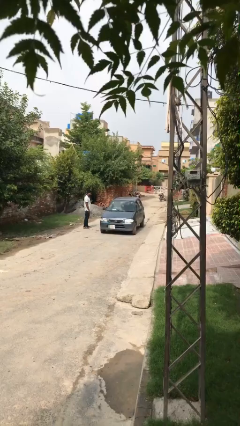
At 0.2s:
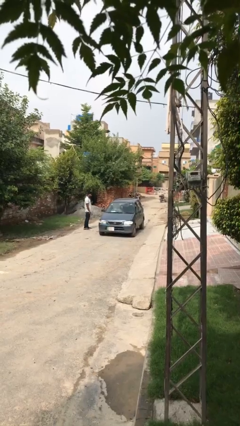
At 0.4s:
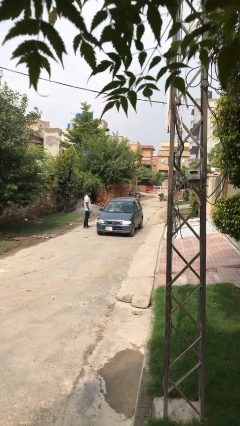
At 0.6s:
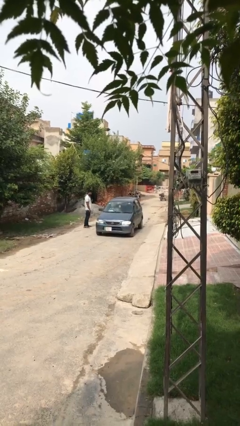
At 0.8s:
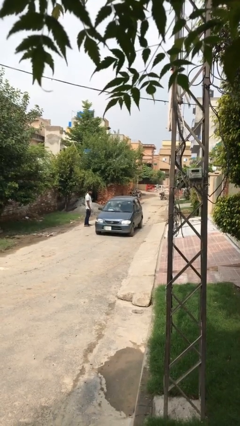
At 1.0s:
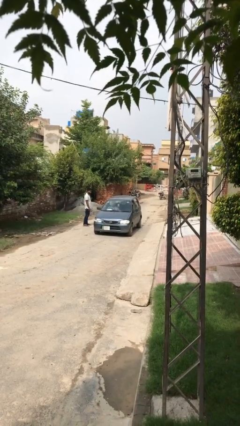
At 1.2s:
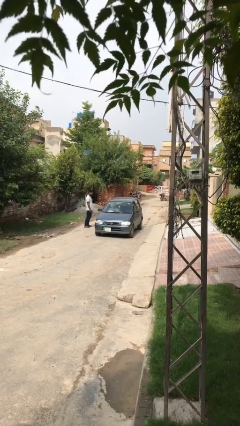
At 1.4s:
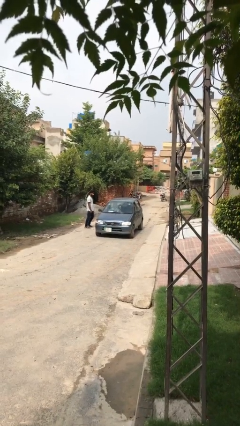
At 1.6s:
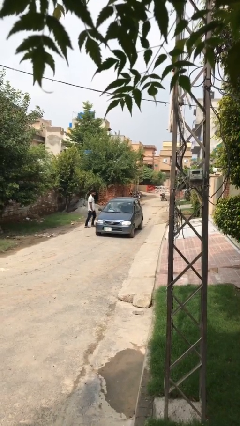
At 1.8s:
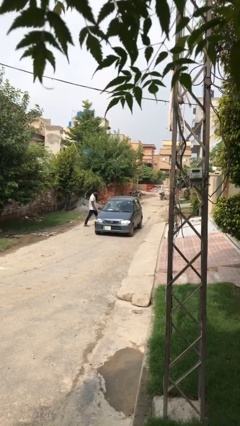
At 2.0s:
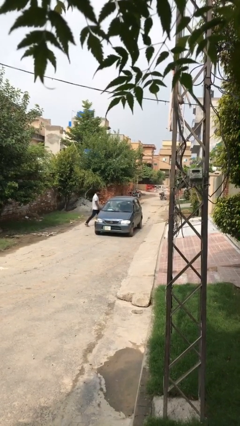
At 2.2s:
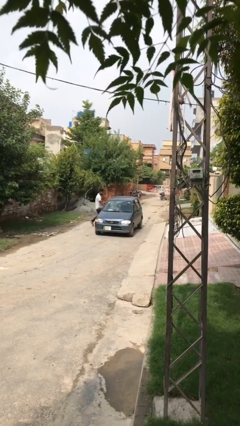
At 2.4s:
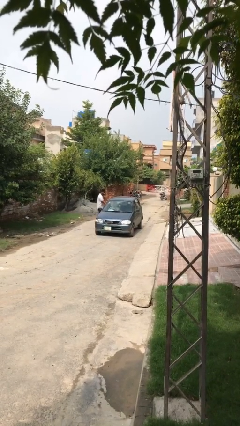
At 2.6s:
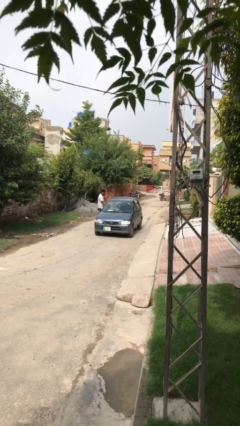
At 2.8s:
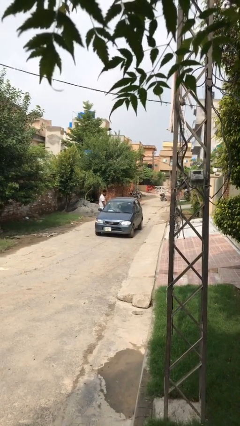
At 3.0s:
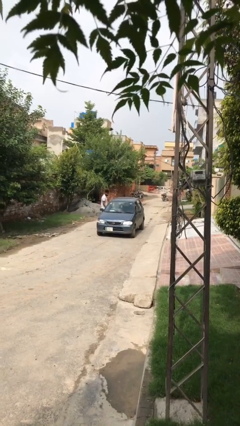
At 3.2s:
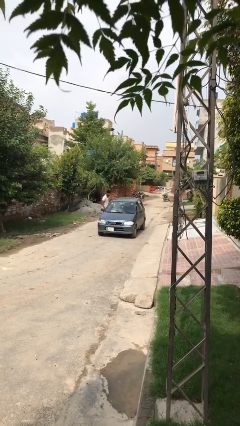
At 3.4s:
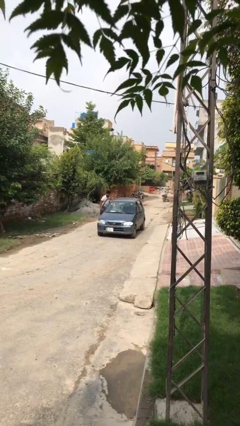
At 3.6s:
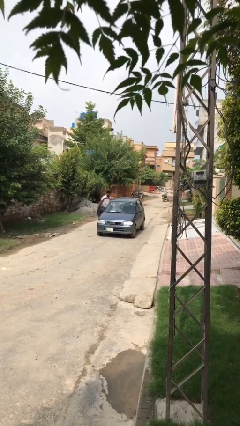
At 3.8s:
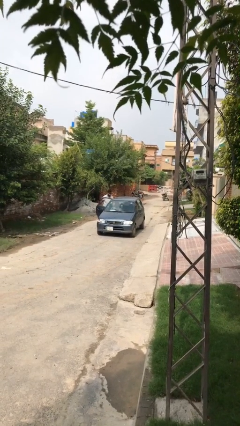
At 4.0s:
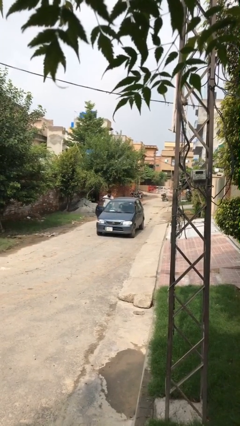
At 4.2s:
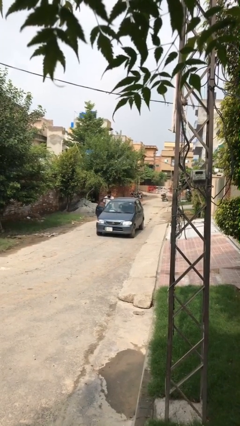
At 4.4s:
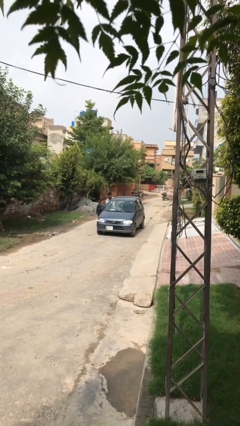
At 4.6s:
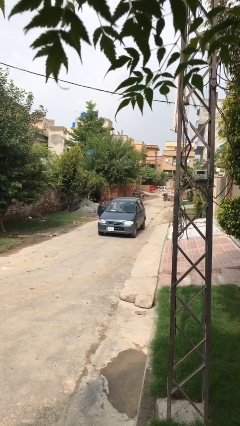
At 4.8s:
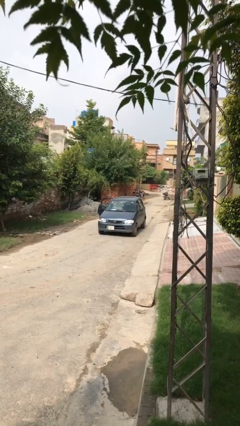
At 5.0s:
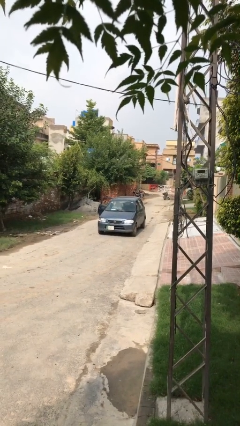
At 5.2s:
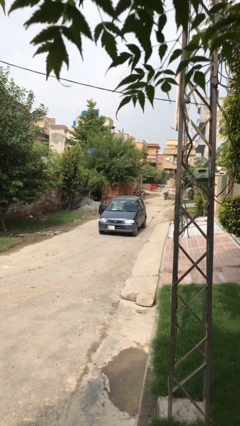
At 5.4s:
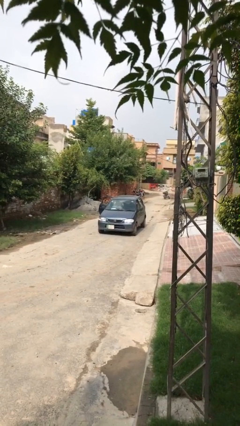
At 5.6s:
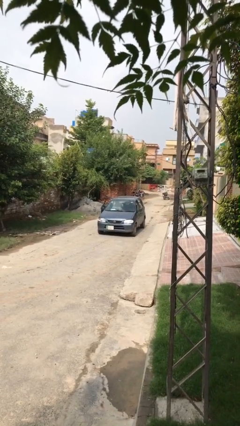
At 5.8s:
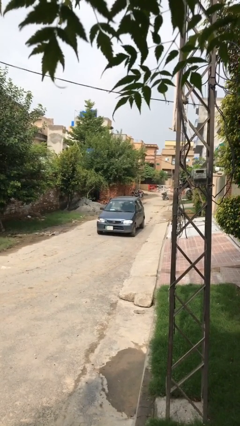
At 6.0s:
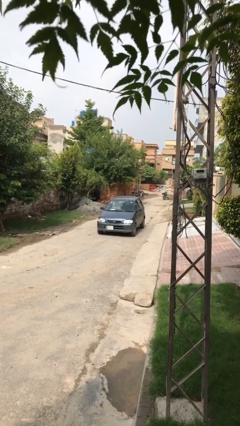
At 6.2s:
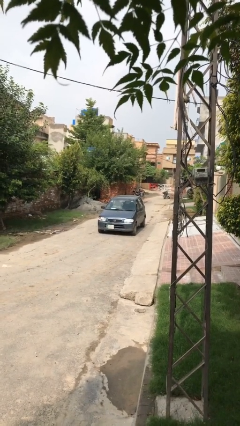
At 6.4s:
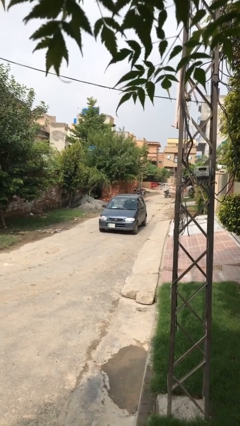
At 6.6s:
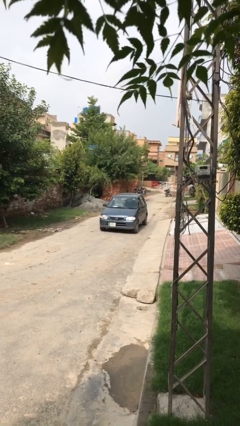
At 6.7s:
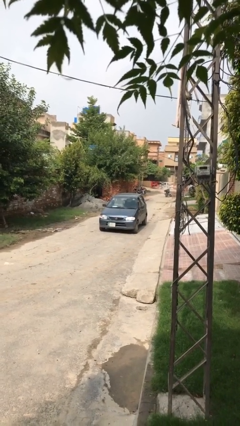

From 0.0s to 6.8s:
car picks up person

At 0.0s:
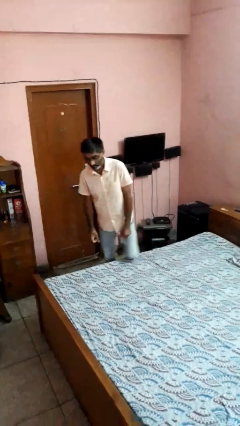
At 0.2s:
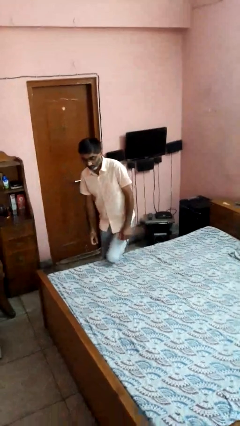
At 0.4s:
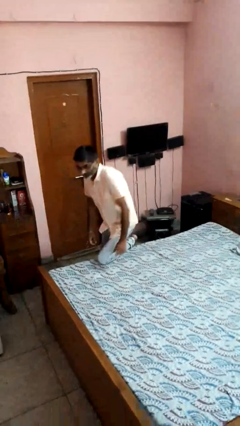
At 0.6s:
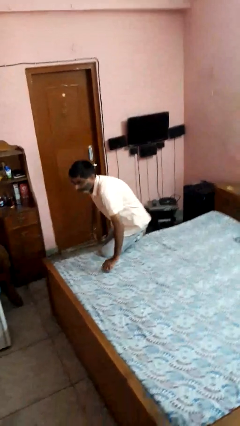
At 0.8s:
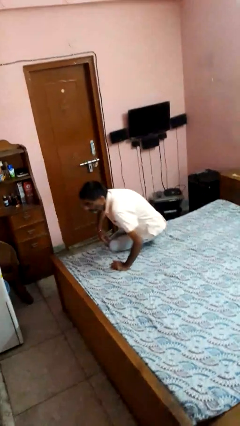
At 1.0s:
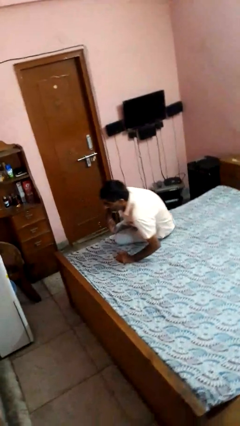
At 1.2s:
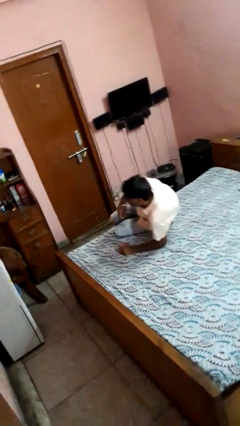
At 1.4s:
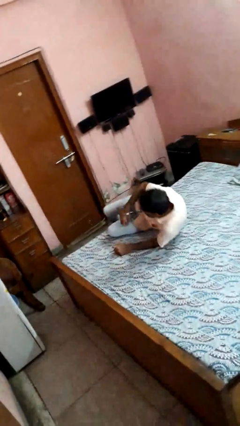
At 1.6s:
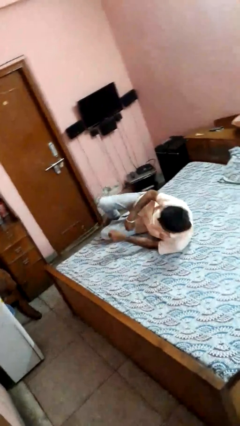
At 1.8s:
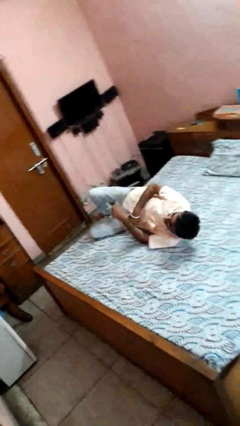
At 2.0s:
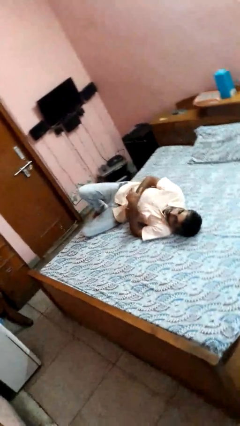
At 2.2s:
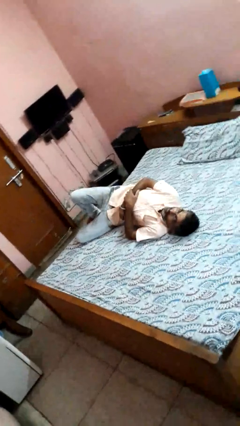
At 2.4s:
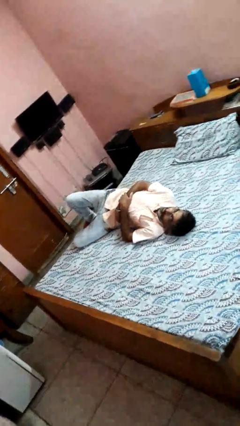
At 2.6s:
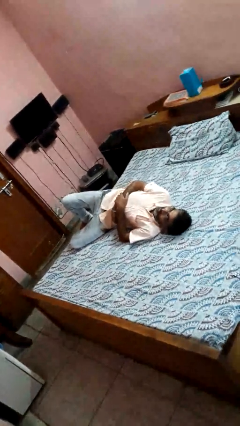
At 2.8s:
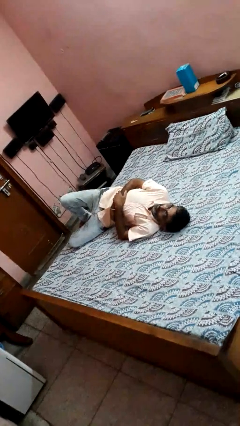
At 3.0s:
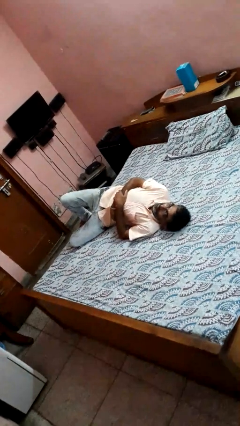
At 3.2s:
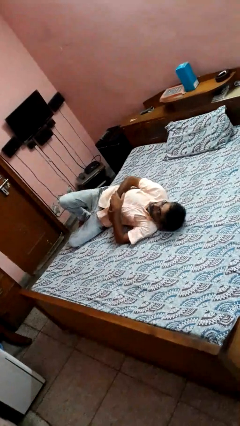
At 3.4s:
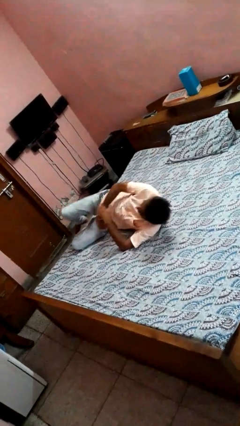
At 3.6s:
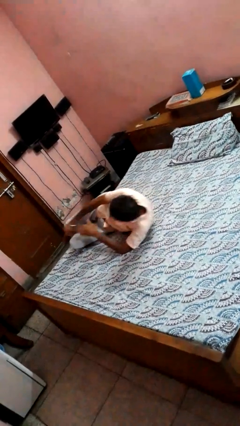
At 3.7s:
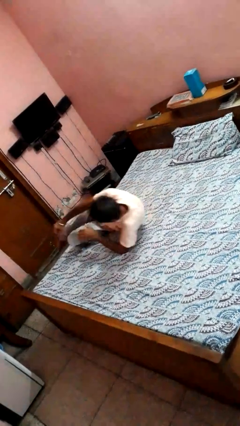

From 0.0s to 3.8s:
person lies down on bed

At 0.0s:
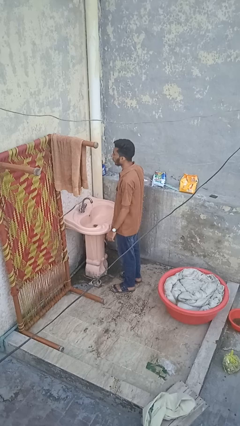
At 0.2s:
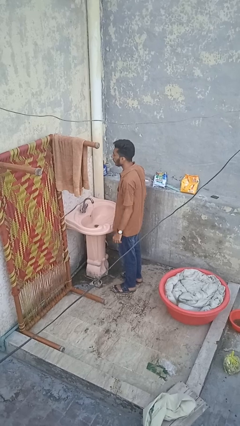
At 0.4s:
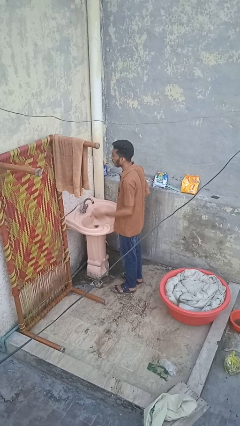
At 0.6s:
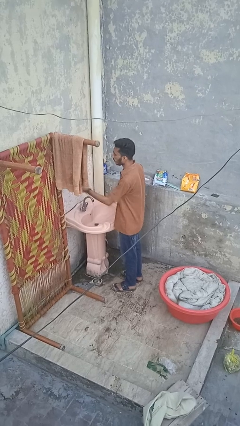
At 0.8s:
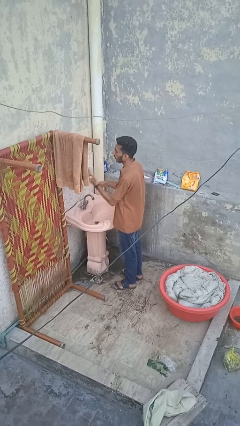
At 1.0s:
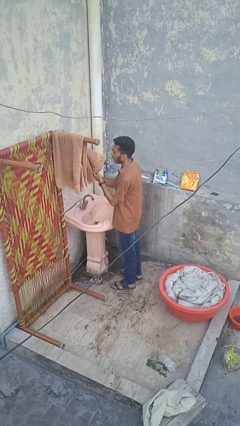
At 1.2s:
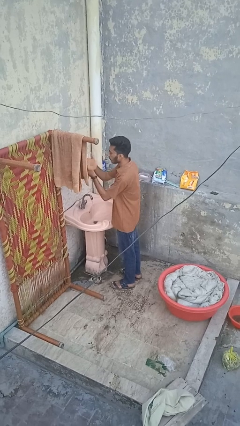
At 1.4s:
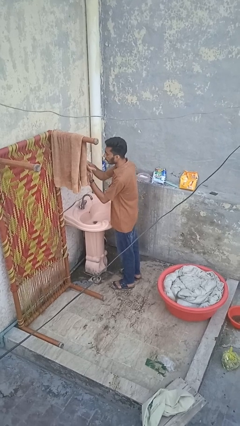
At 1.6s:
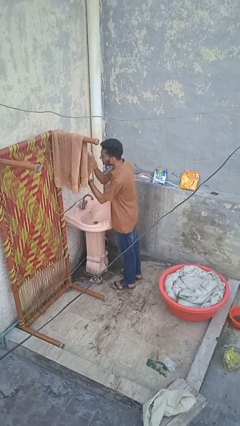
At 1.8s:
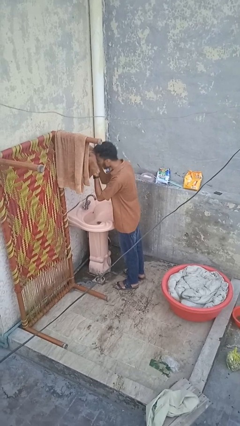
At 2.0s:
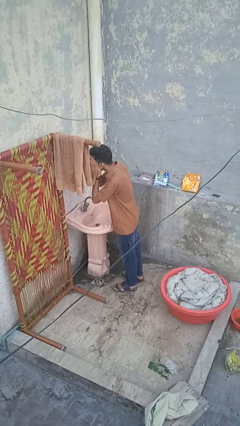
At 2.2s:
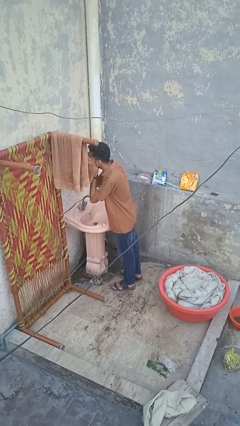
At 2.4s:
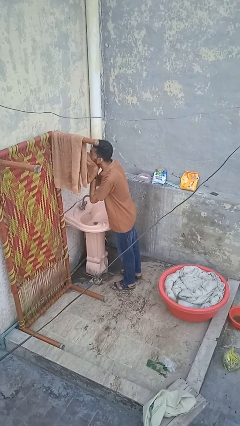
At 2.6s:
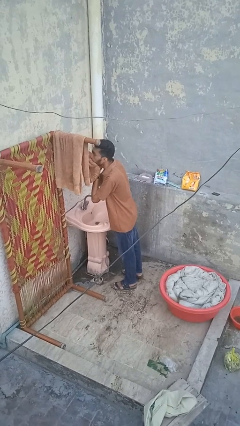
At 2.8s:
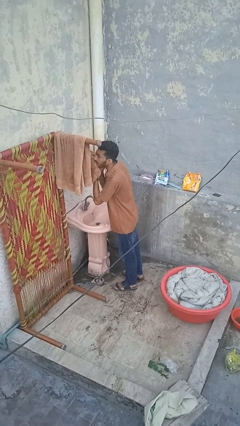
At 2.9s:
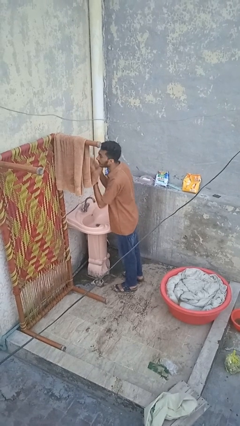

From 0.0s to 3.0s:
person dries face with towel

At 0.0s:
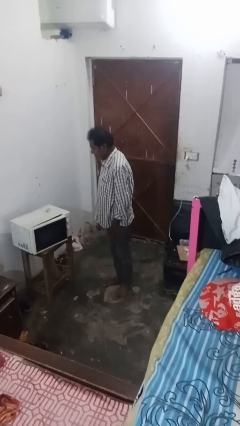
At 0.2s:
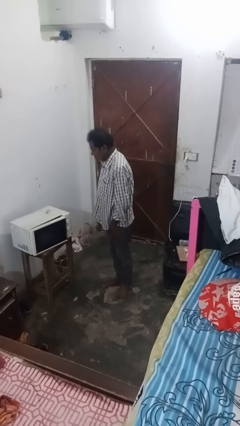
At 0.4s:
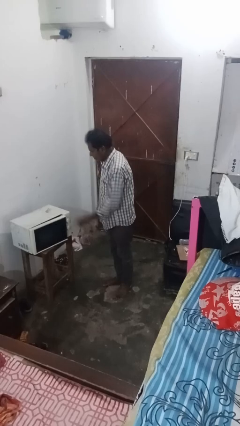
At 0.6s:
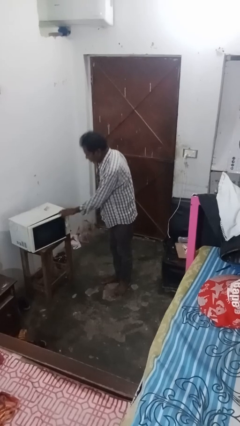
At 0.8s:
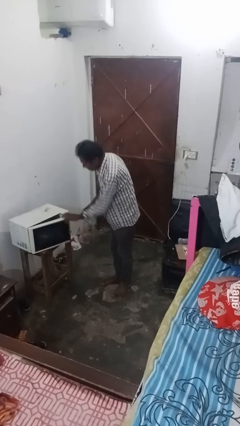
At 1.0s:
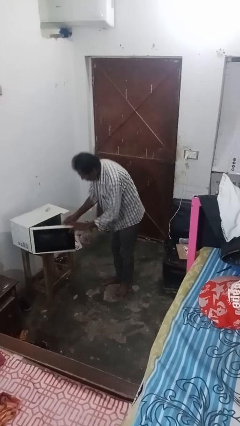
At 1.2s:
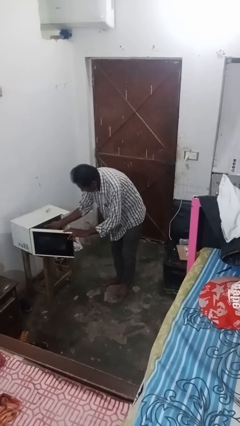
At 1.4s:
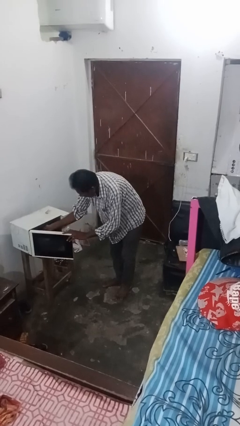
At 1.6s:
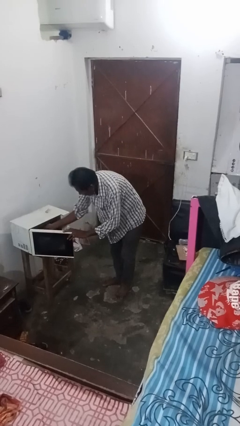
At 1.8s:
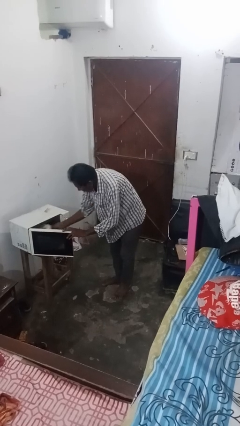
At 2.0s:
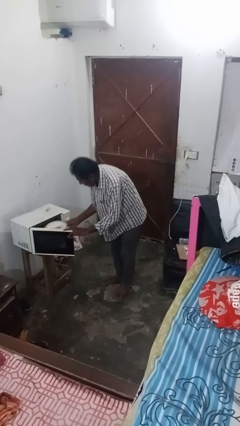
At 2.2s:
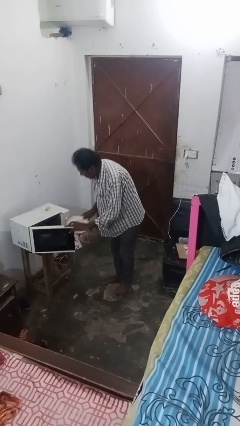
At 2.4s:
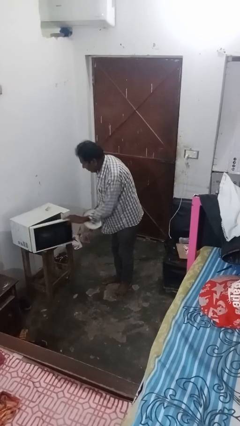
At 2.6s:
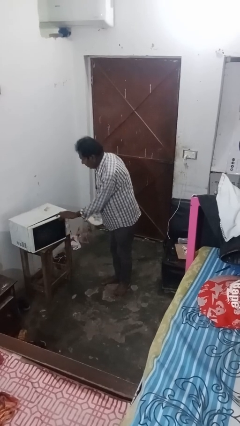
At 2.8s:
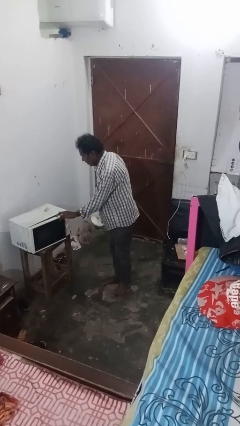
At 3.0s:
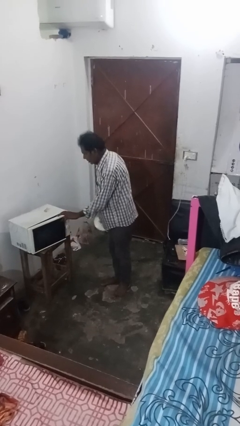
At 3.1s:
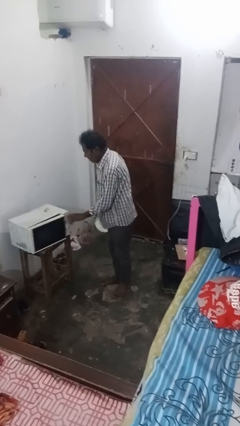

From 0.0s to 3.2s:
person takes object from microwave

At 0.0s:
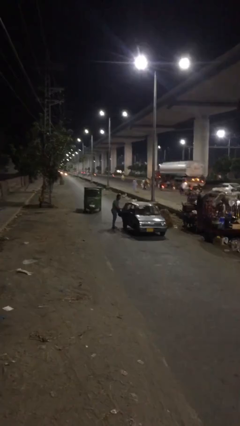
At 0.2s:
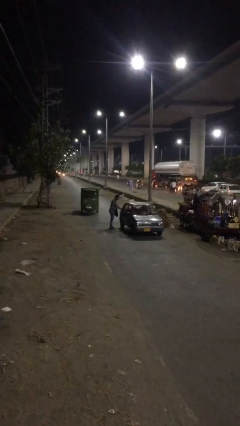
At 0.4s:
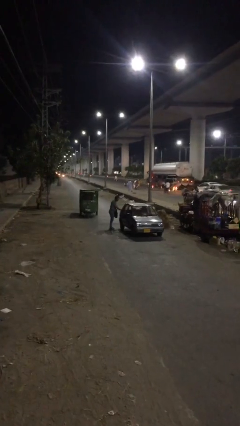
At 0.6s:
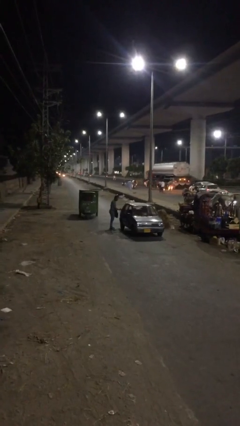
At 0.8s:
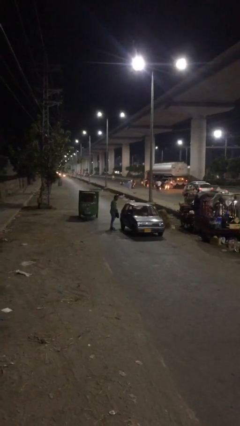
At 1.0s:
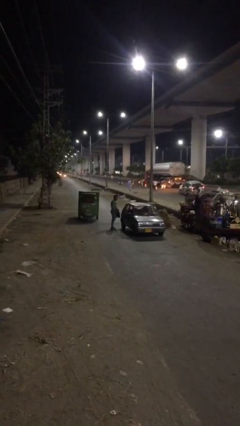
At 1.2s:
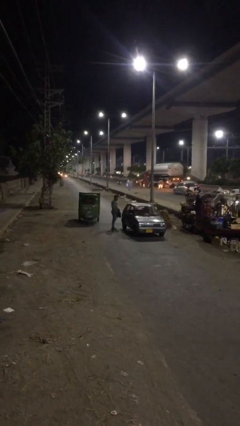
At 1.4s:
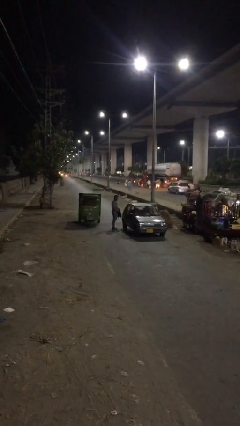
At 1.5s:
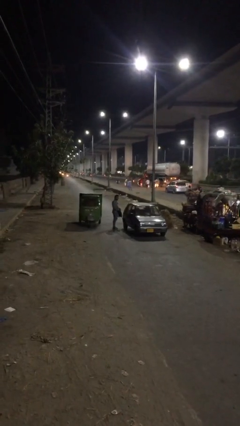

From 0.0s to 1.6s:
person closes car door
